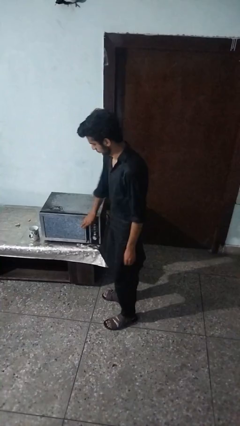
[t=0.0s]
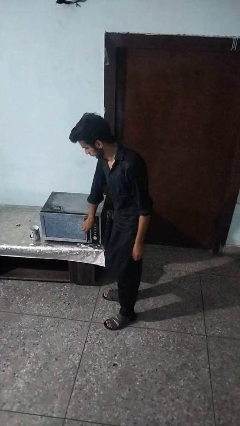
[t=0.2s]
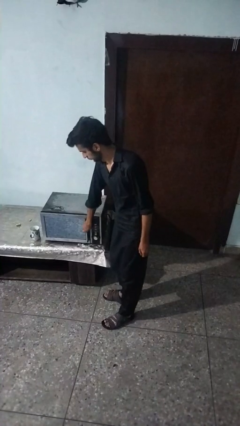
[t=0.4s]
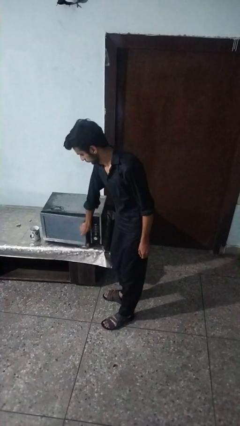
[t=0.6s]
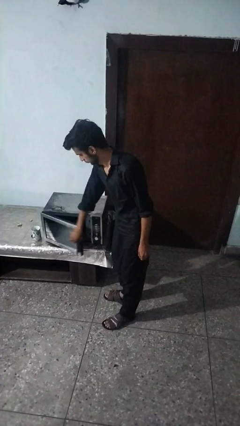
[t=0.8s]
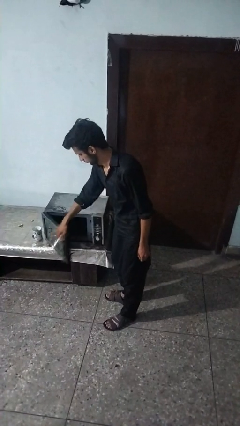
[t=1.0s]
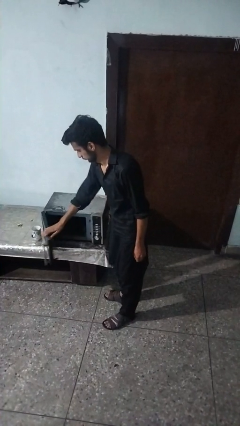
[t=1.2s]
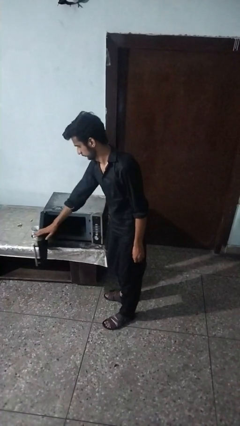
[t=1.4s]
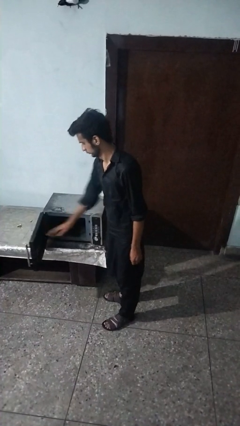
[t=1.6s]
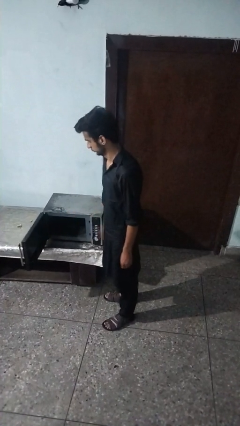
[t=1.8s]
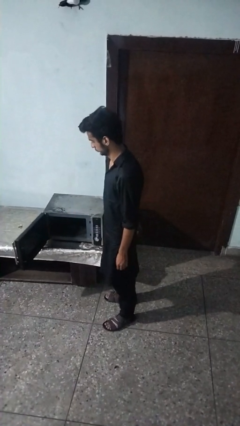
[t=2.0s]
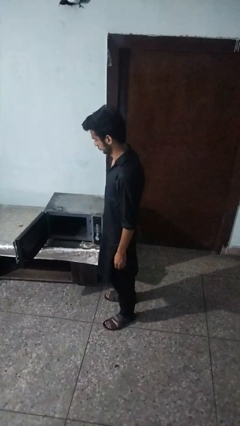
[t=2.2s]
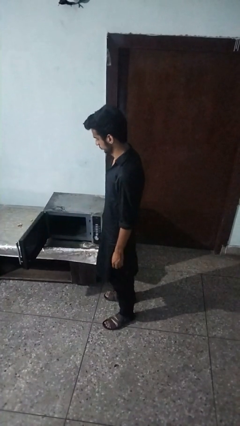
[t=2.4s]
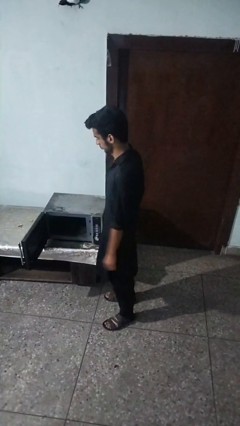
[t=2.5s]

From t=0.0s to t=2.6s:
person opens oven door

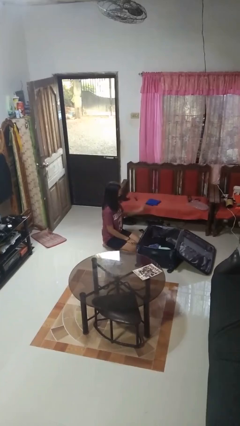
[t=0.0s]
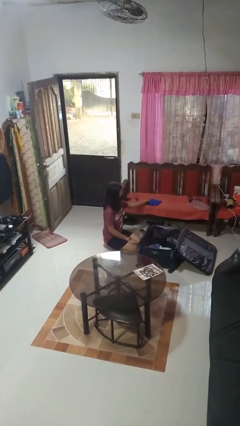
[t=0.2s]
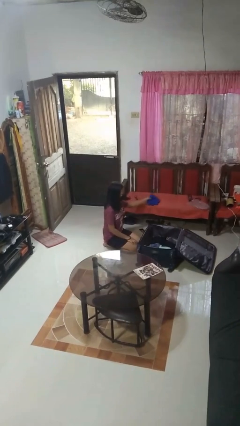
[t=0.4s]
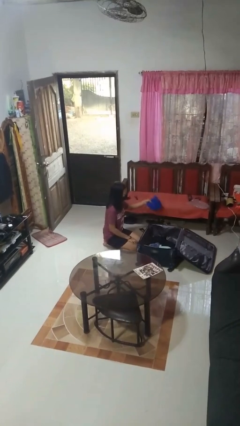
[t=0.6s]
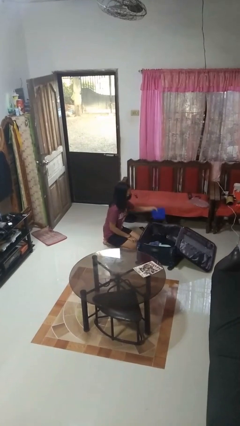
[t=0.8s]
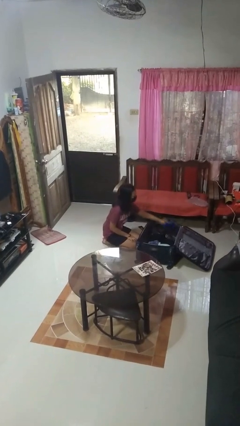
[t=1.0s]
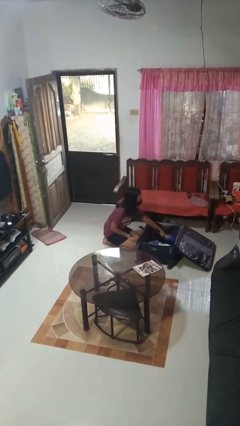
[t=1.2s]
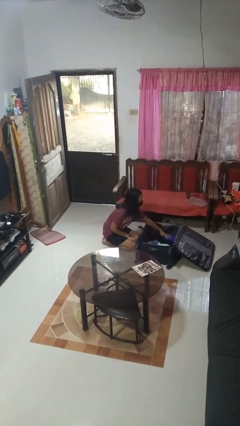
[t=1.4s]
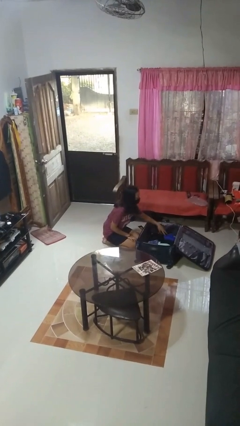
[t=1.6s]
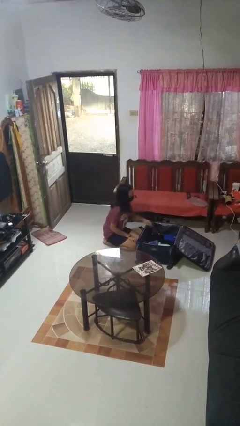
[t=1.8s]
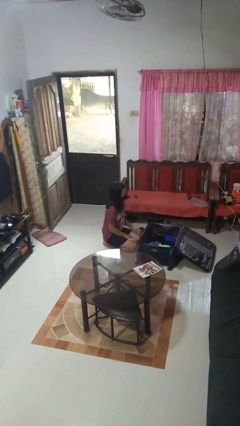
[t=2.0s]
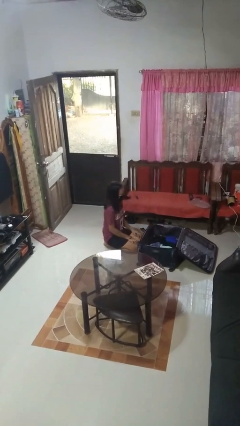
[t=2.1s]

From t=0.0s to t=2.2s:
person loads clothes into suitcase

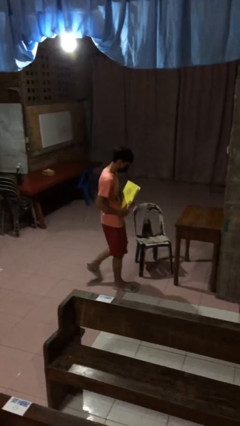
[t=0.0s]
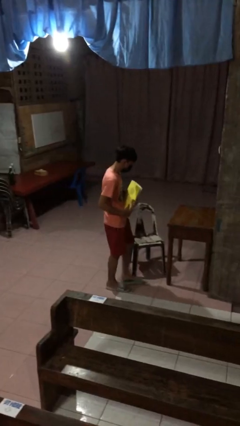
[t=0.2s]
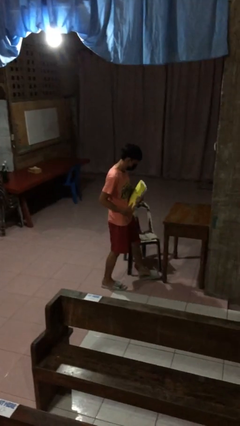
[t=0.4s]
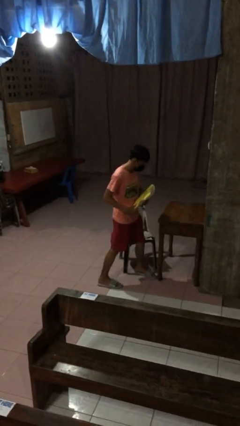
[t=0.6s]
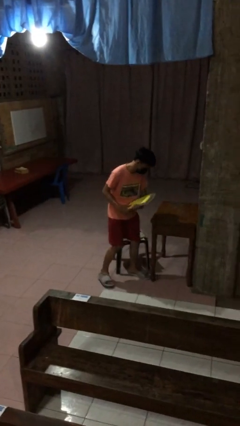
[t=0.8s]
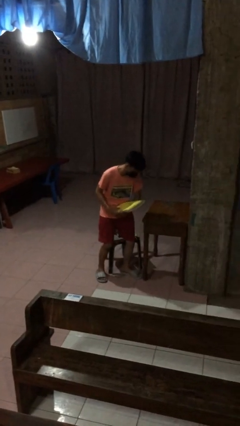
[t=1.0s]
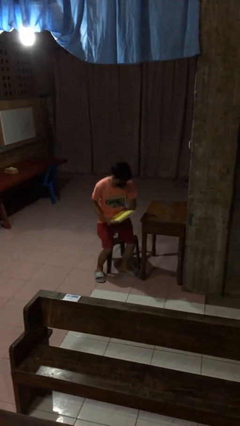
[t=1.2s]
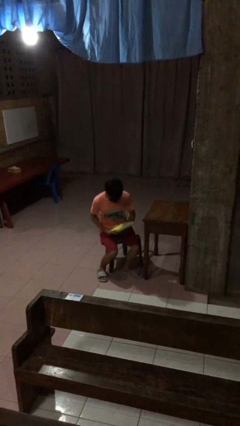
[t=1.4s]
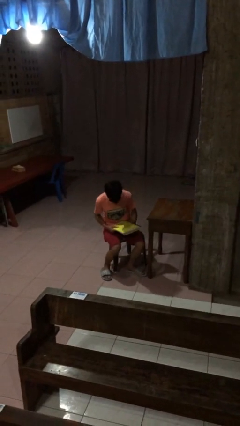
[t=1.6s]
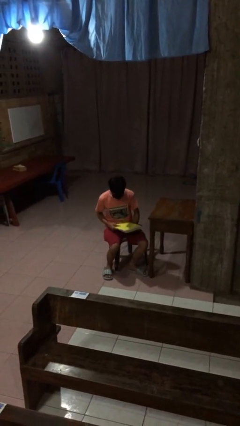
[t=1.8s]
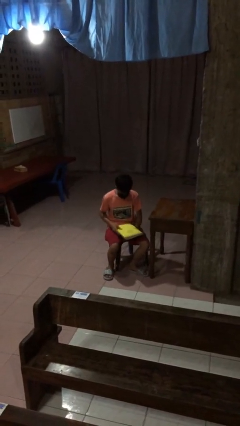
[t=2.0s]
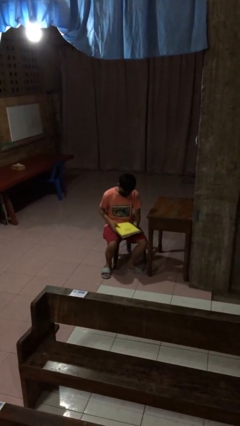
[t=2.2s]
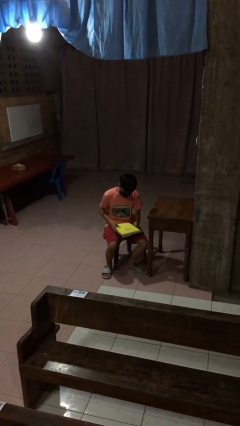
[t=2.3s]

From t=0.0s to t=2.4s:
person sits down

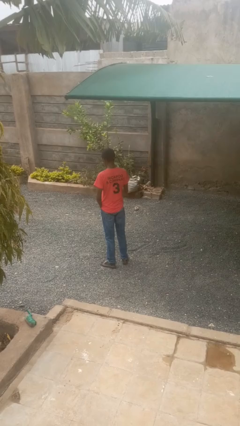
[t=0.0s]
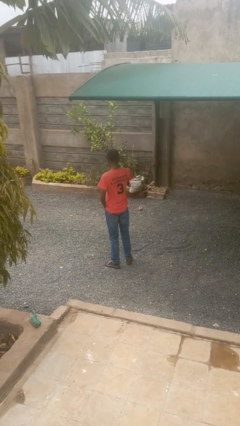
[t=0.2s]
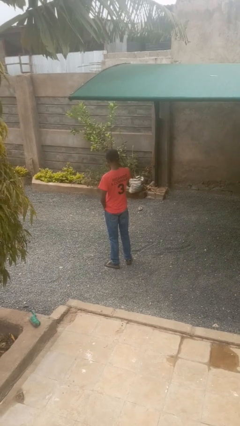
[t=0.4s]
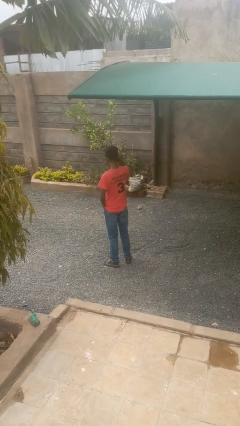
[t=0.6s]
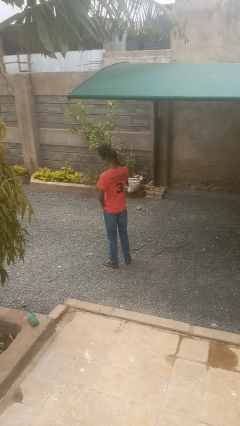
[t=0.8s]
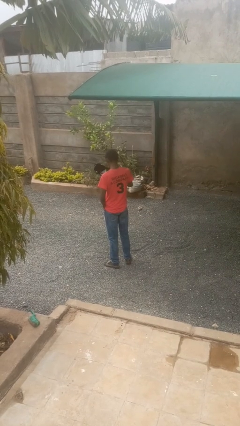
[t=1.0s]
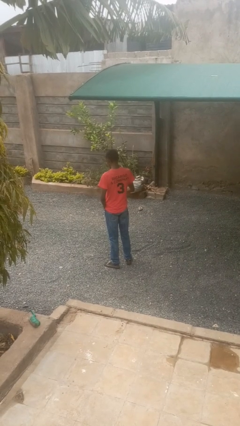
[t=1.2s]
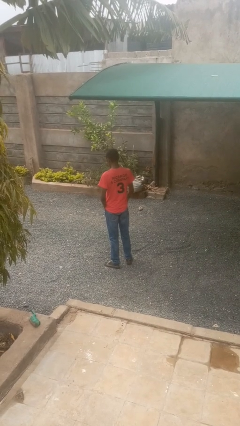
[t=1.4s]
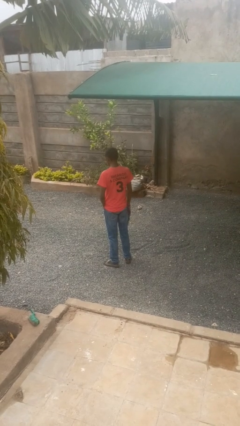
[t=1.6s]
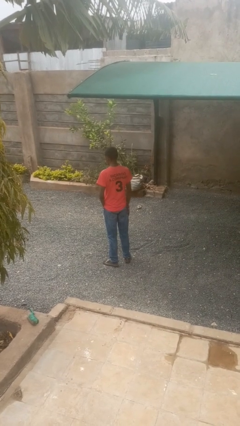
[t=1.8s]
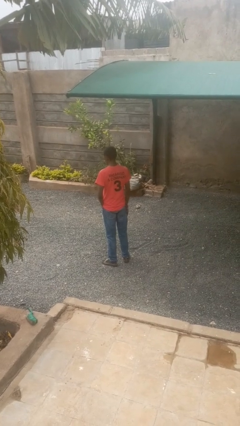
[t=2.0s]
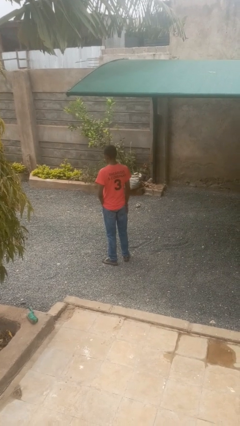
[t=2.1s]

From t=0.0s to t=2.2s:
person takes off hat

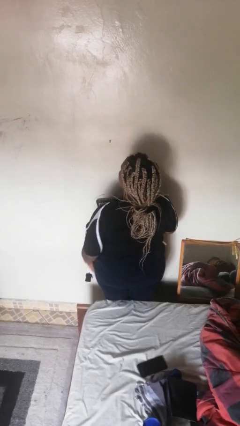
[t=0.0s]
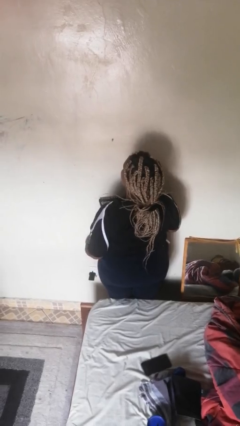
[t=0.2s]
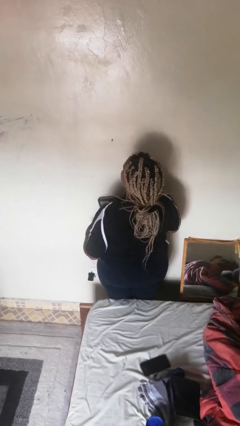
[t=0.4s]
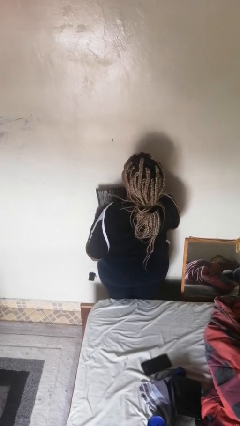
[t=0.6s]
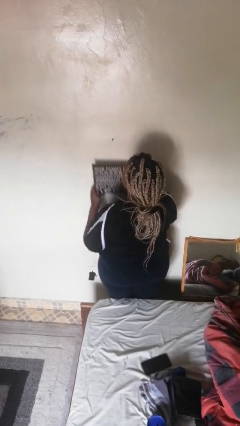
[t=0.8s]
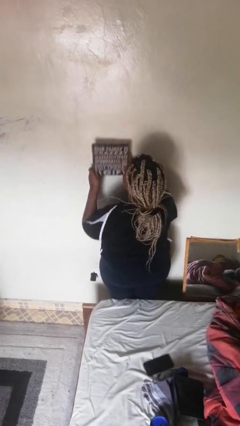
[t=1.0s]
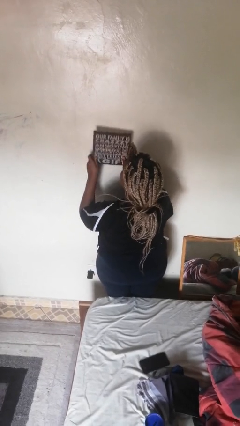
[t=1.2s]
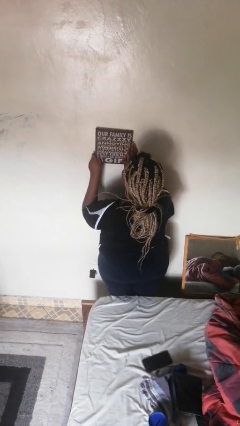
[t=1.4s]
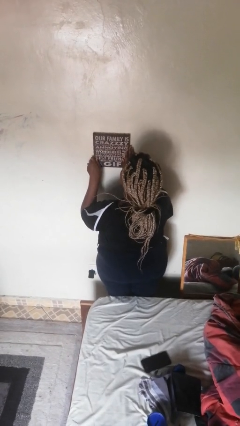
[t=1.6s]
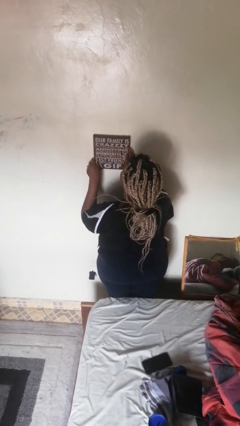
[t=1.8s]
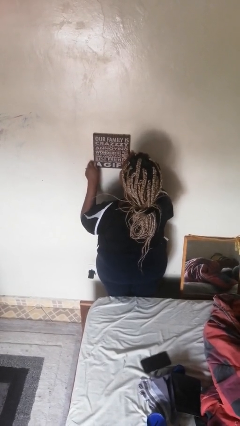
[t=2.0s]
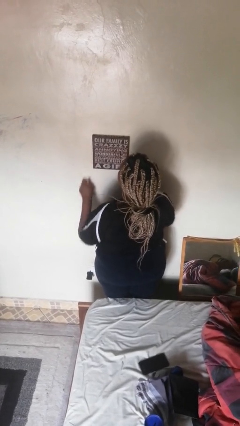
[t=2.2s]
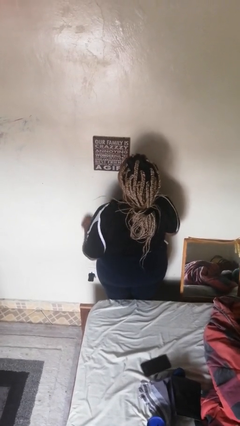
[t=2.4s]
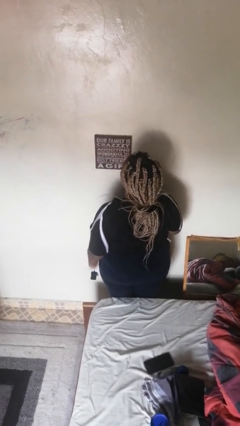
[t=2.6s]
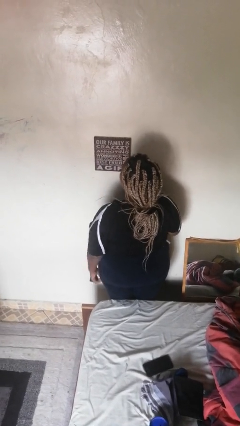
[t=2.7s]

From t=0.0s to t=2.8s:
person puts up picture frame

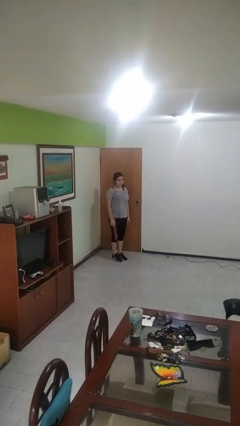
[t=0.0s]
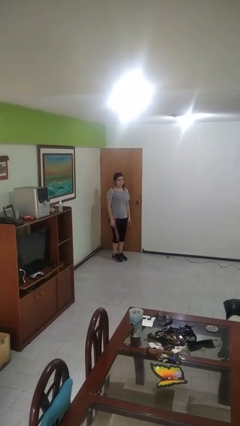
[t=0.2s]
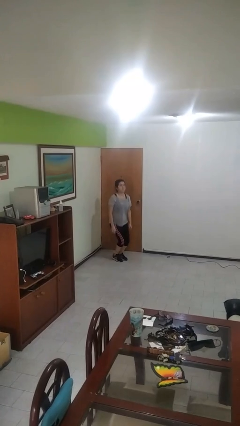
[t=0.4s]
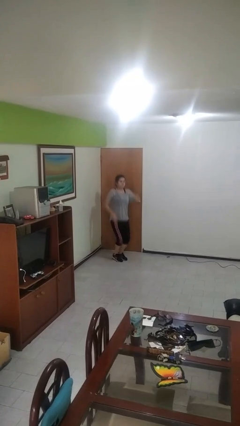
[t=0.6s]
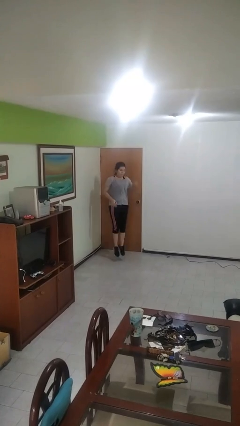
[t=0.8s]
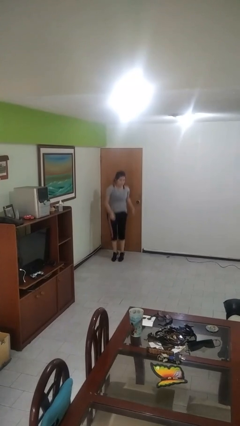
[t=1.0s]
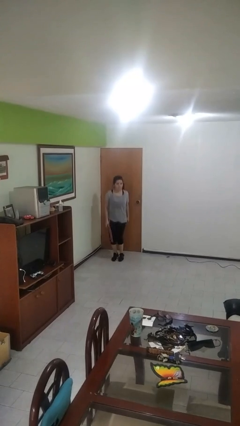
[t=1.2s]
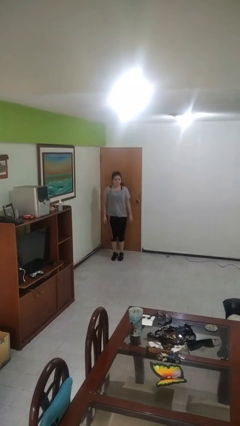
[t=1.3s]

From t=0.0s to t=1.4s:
person jumps

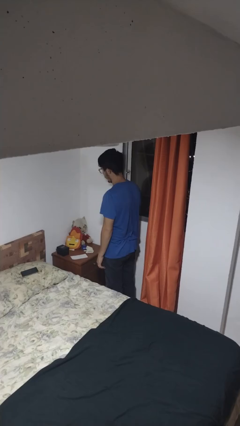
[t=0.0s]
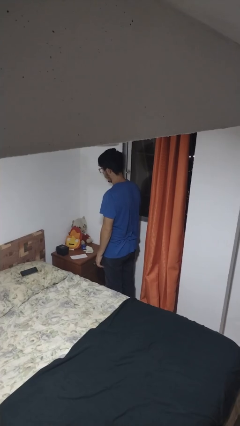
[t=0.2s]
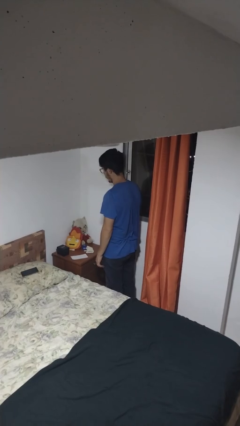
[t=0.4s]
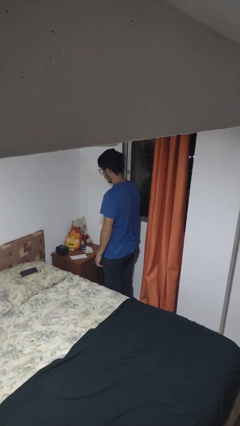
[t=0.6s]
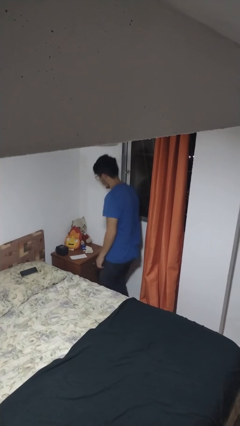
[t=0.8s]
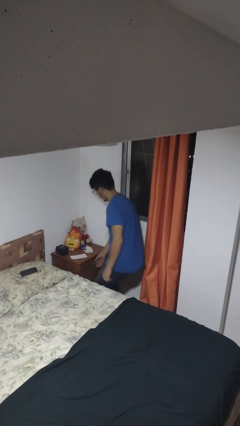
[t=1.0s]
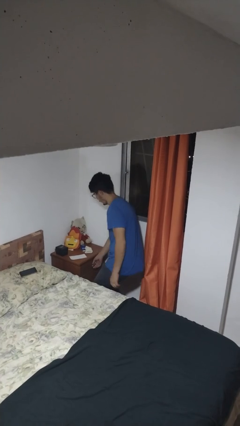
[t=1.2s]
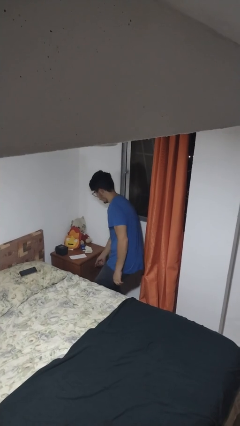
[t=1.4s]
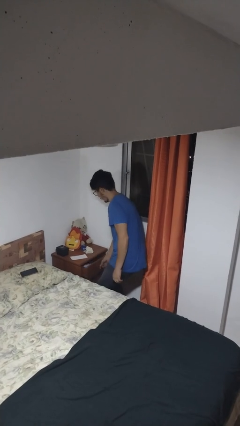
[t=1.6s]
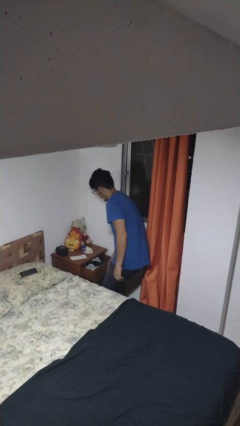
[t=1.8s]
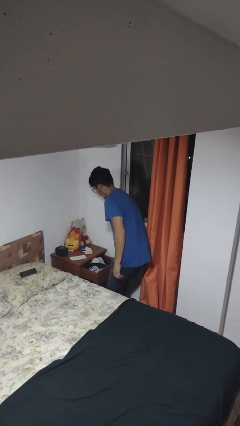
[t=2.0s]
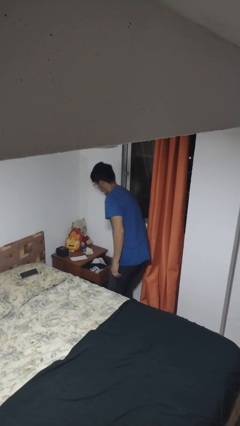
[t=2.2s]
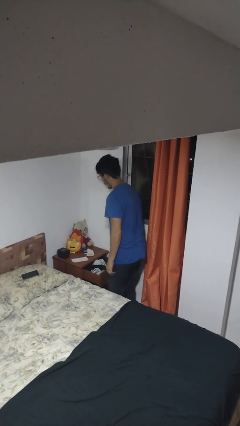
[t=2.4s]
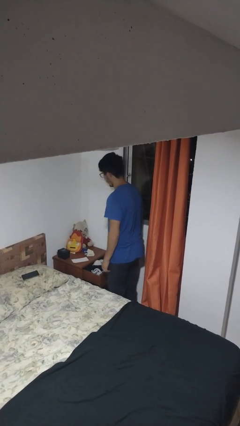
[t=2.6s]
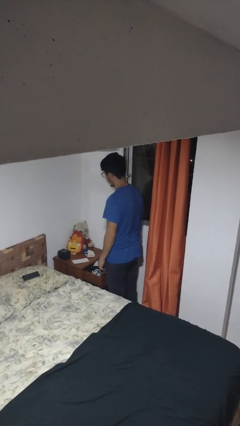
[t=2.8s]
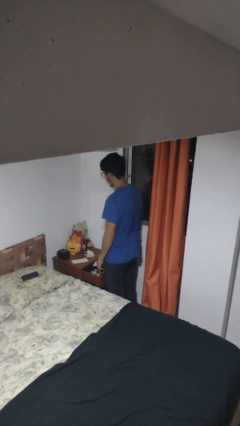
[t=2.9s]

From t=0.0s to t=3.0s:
person opens dresser drawer

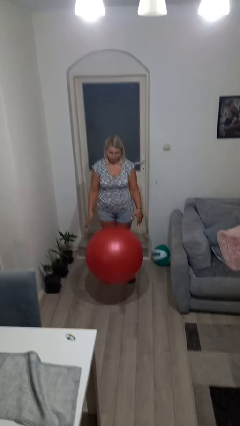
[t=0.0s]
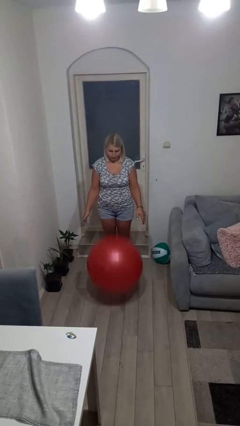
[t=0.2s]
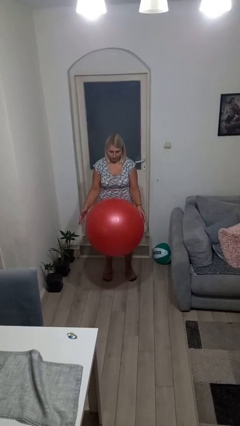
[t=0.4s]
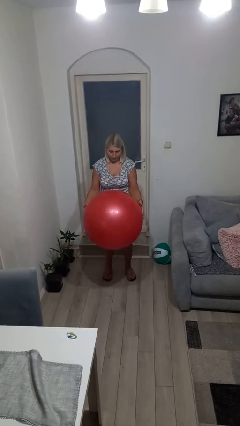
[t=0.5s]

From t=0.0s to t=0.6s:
person bounces ball on floor
